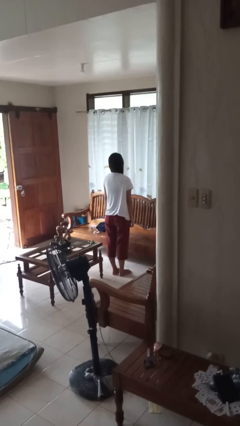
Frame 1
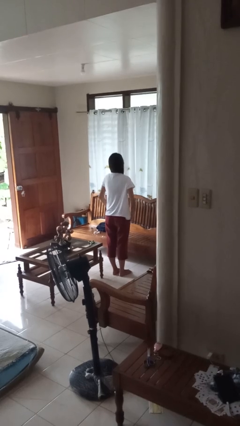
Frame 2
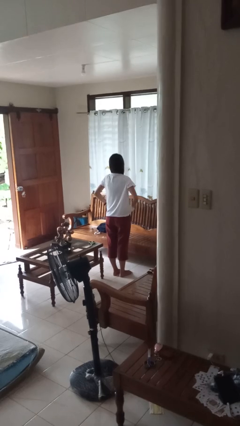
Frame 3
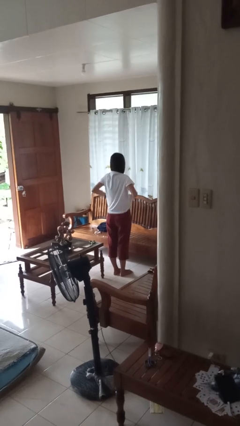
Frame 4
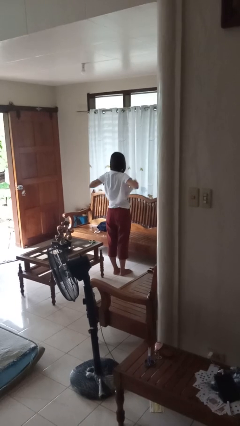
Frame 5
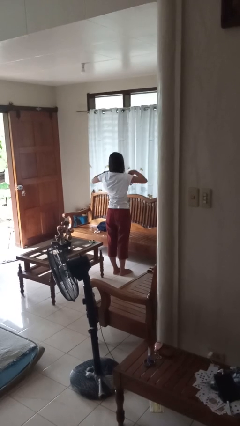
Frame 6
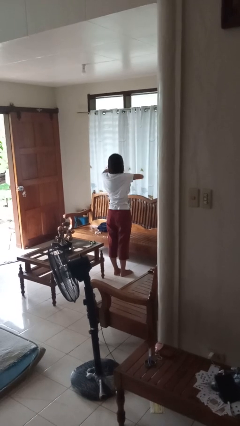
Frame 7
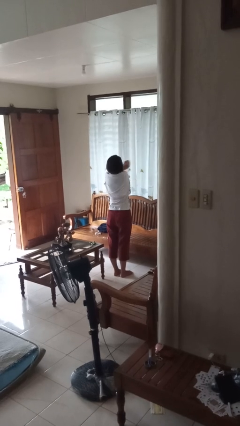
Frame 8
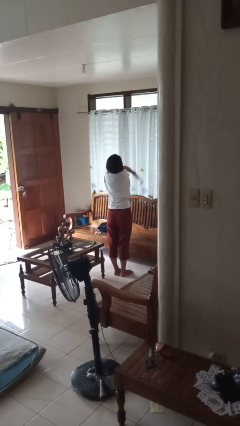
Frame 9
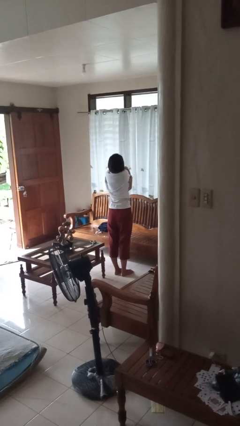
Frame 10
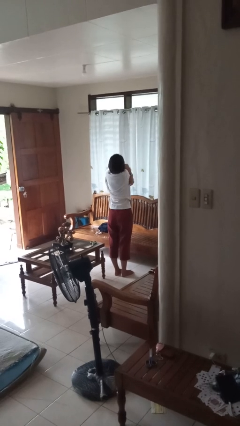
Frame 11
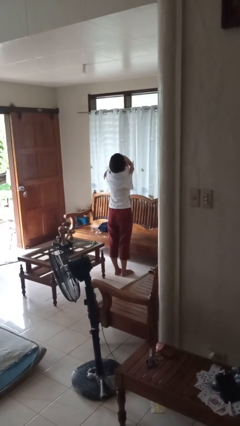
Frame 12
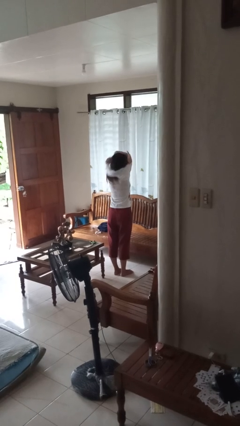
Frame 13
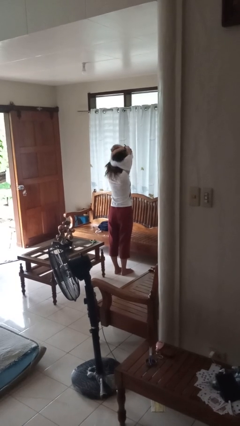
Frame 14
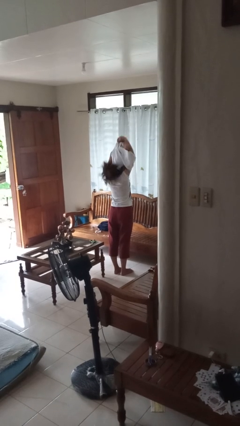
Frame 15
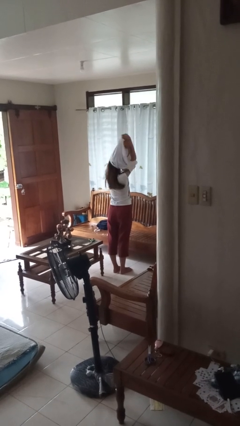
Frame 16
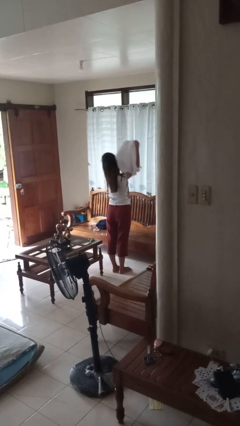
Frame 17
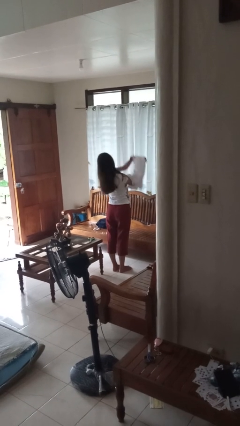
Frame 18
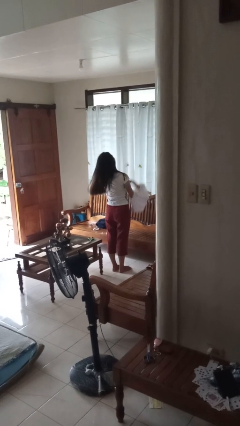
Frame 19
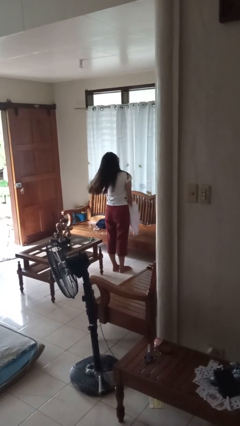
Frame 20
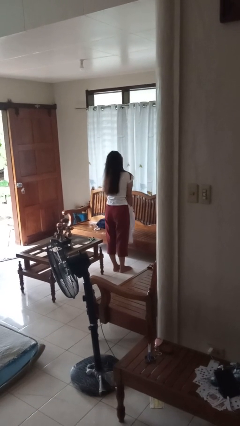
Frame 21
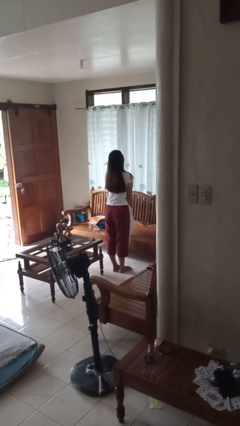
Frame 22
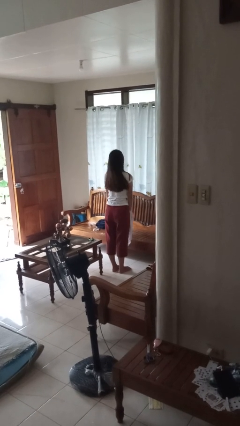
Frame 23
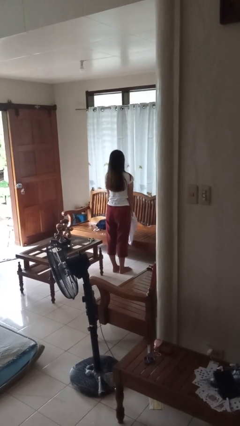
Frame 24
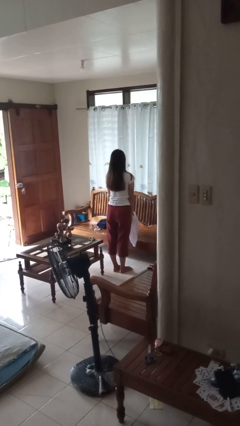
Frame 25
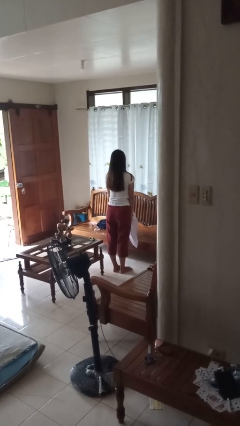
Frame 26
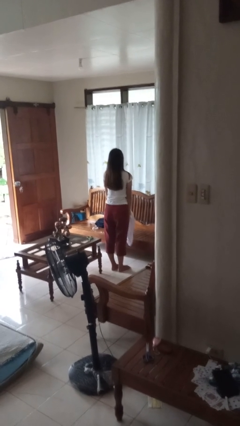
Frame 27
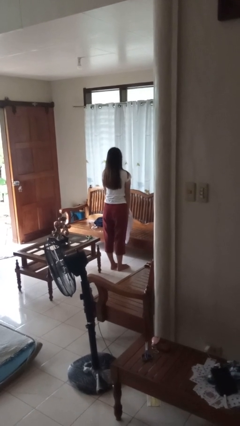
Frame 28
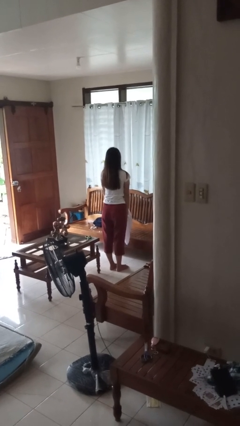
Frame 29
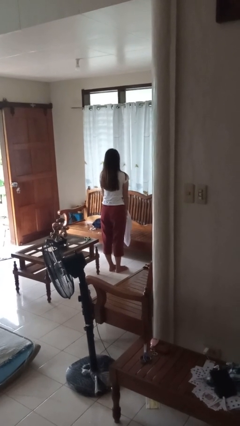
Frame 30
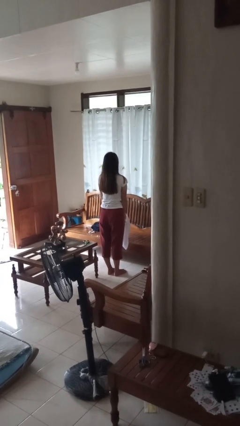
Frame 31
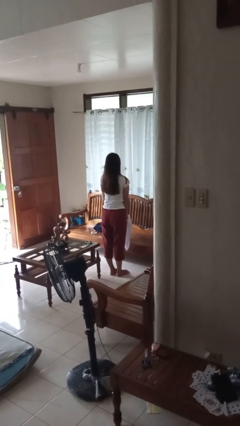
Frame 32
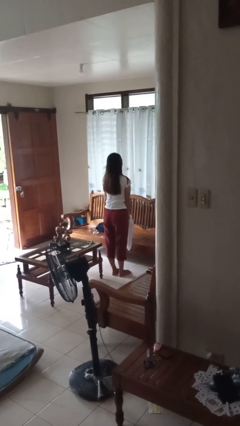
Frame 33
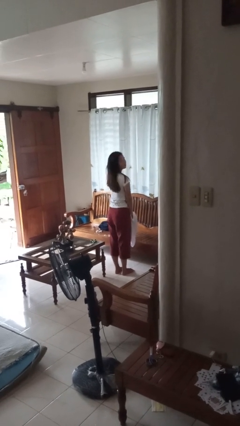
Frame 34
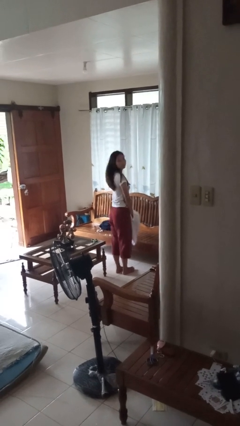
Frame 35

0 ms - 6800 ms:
person takes off shirt

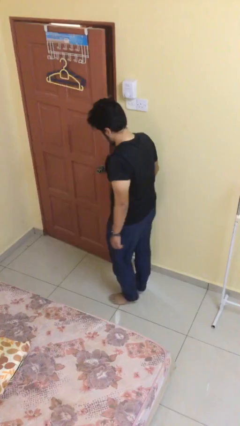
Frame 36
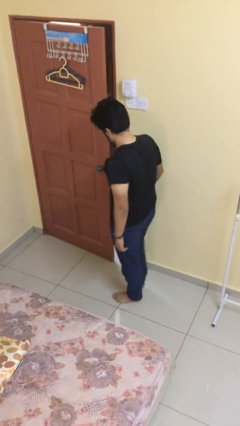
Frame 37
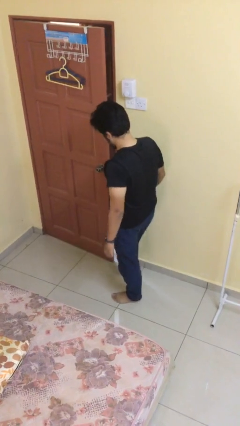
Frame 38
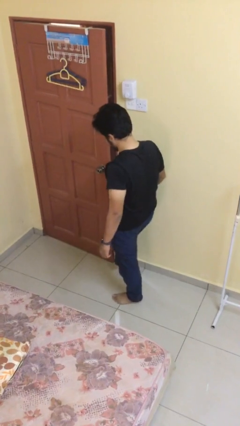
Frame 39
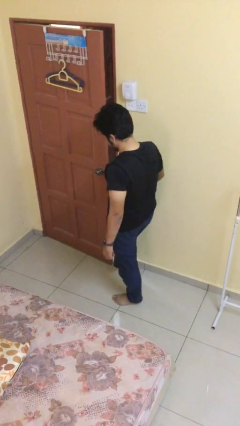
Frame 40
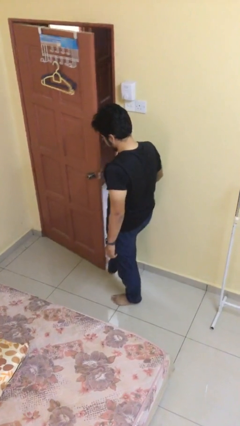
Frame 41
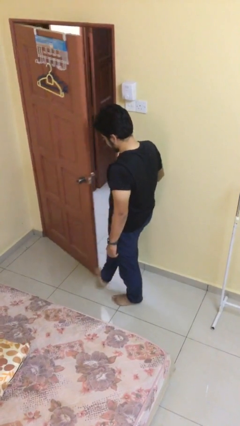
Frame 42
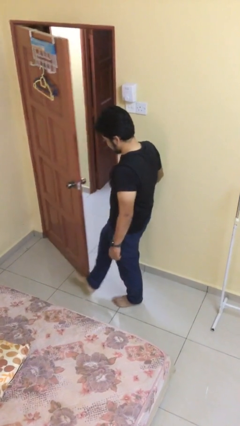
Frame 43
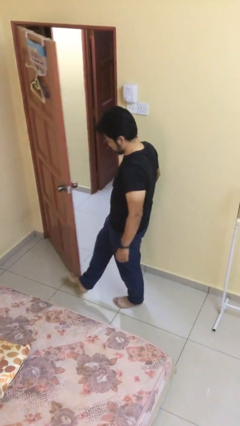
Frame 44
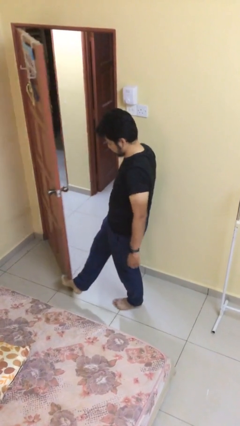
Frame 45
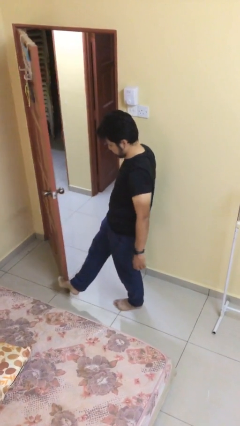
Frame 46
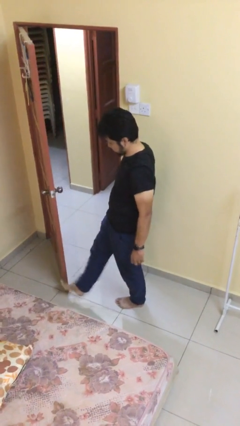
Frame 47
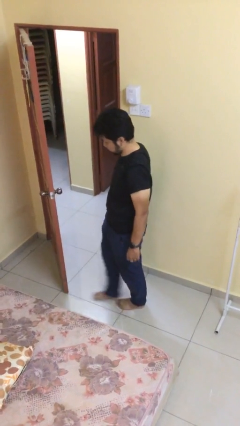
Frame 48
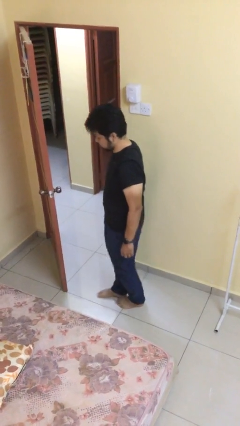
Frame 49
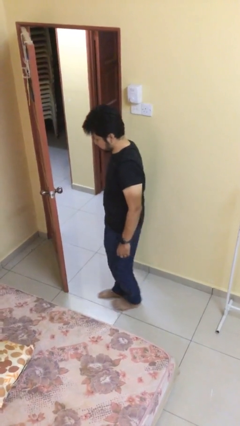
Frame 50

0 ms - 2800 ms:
person opens facility door

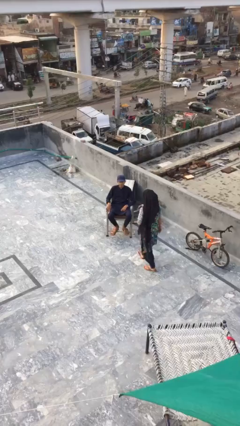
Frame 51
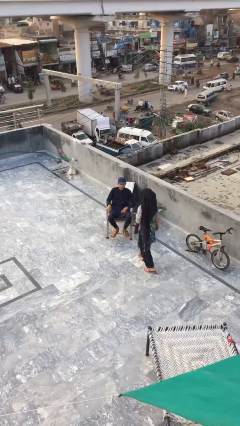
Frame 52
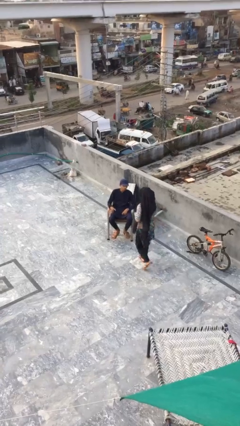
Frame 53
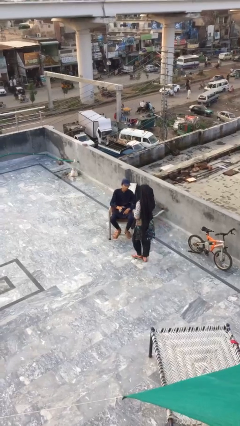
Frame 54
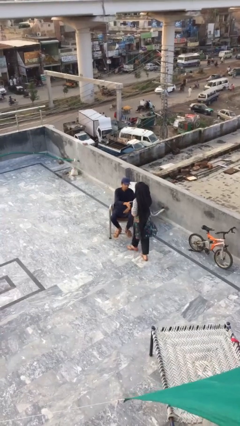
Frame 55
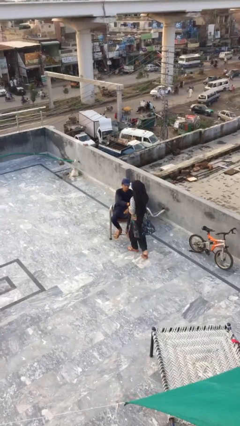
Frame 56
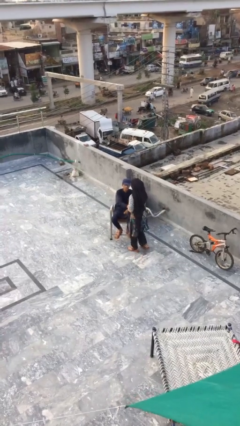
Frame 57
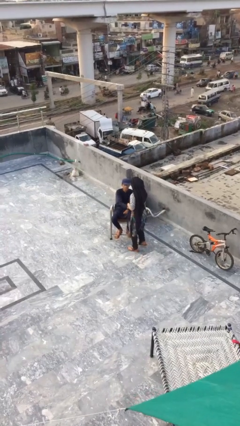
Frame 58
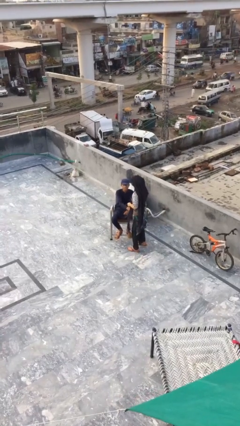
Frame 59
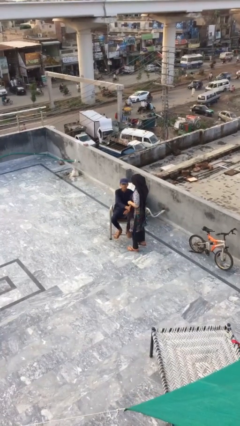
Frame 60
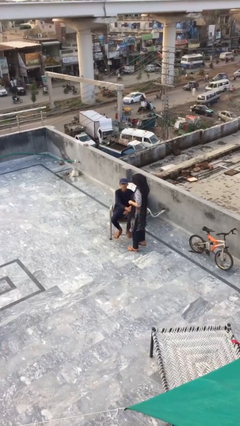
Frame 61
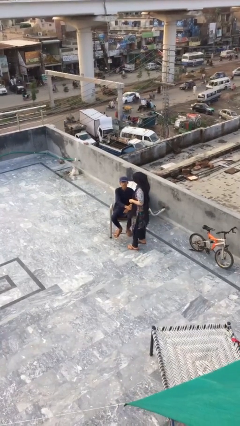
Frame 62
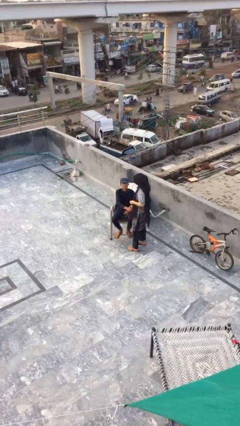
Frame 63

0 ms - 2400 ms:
person shakes hand

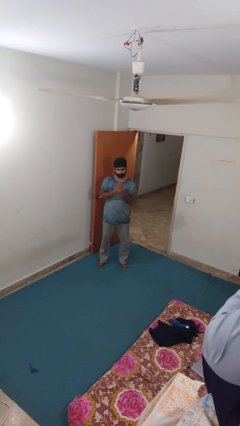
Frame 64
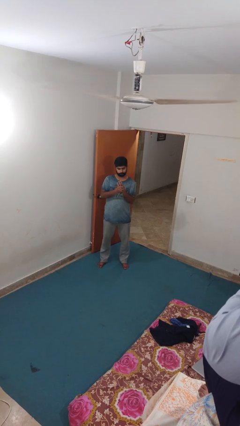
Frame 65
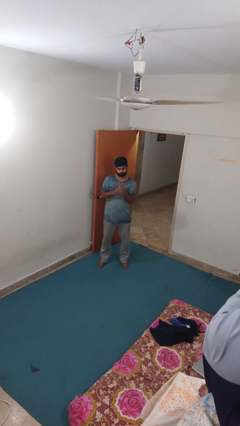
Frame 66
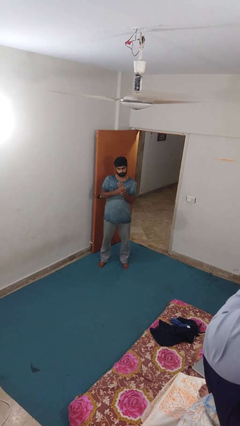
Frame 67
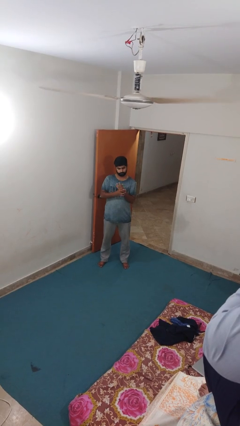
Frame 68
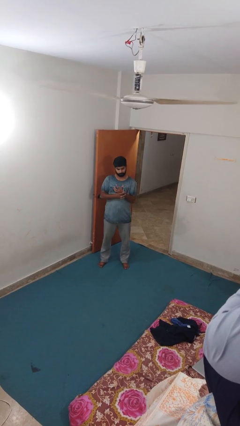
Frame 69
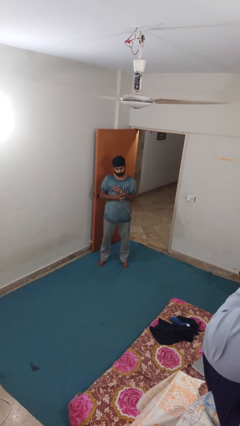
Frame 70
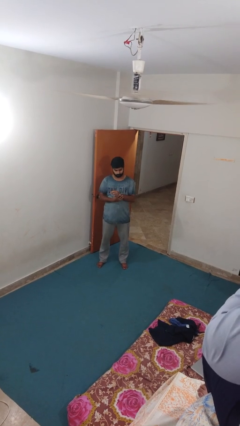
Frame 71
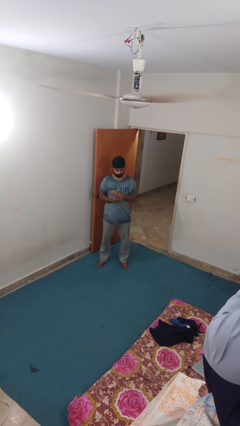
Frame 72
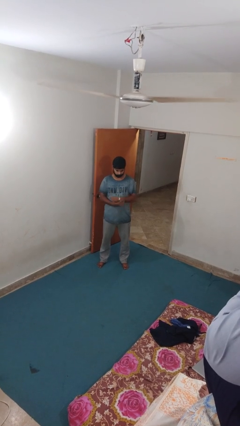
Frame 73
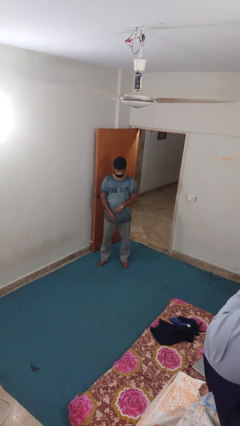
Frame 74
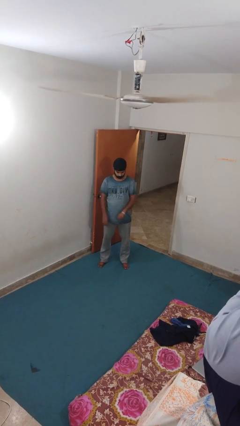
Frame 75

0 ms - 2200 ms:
person puts on wristwatch

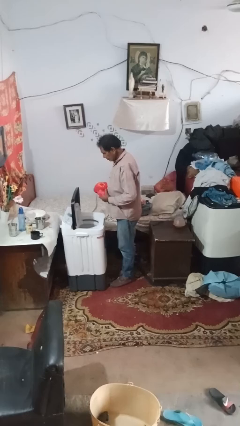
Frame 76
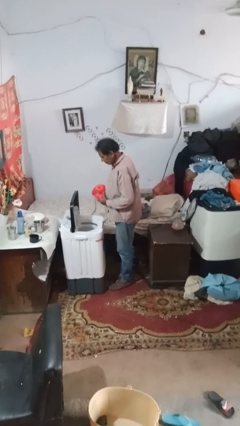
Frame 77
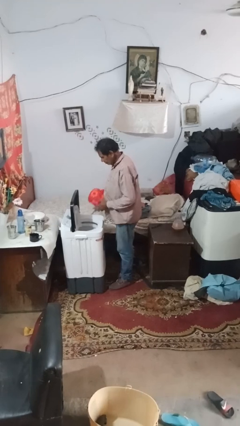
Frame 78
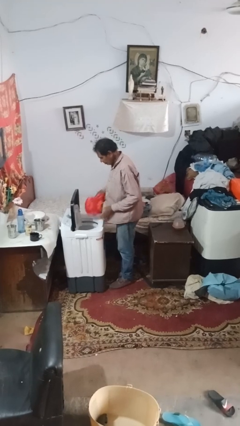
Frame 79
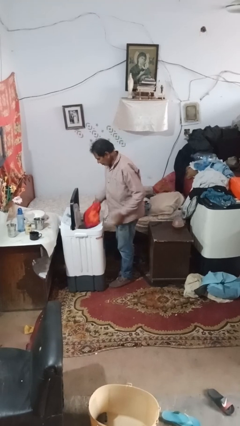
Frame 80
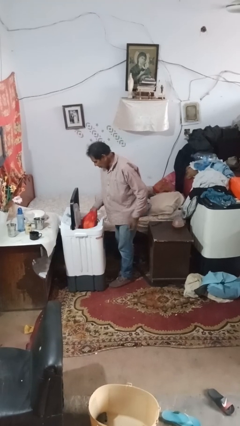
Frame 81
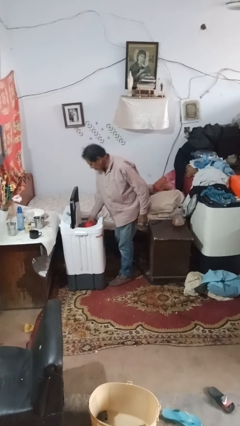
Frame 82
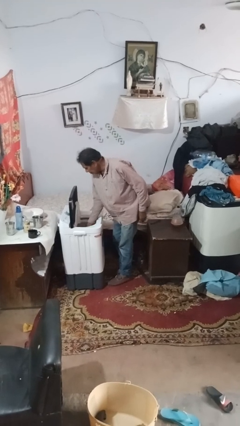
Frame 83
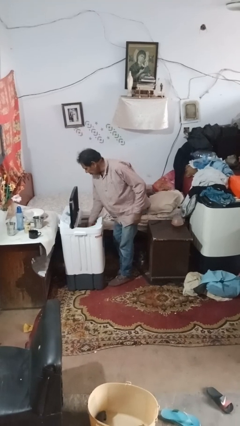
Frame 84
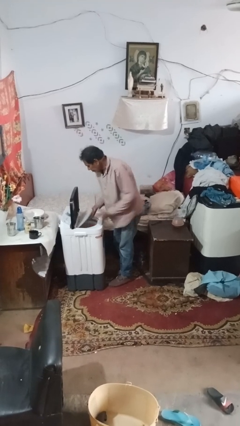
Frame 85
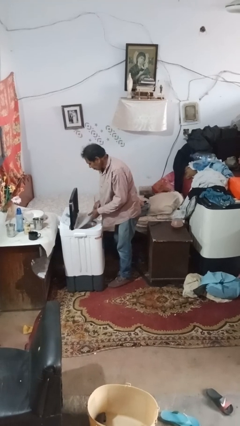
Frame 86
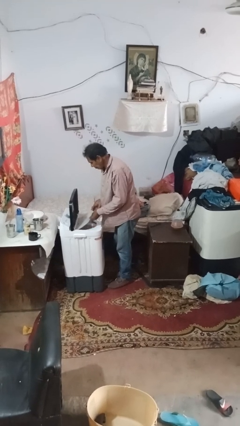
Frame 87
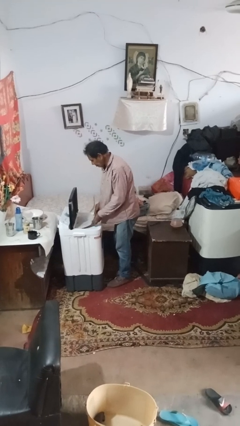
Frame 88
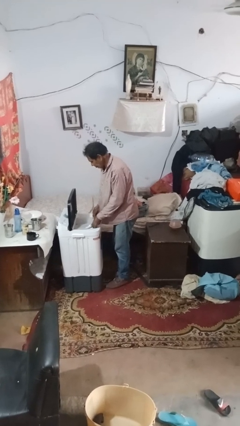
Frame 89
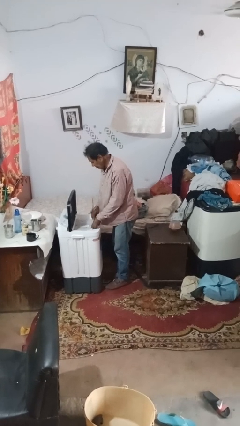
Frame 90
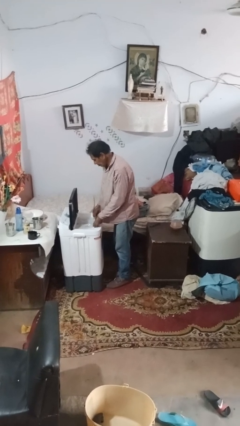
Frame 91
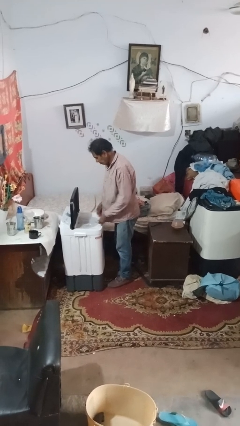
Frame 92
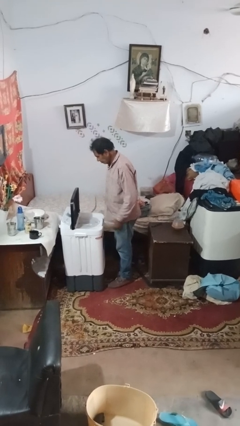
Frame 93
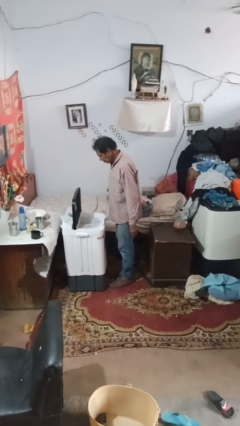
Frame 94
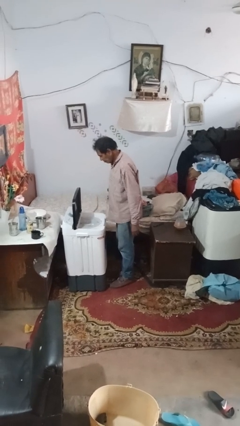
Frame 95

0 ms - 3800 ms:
person loads dryer
